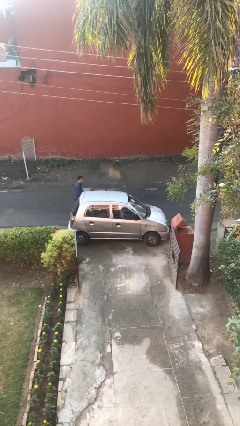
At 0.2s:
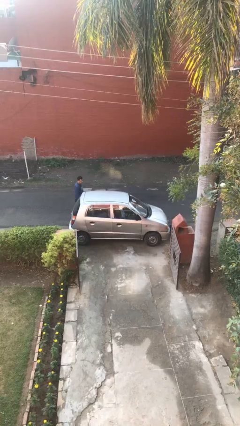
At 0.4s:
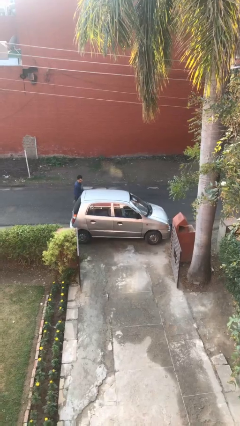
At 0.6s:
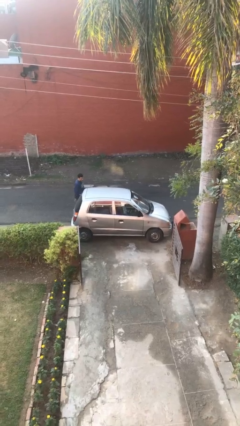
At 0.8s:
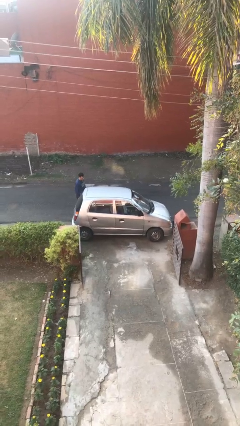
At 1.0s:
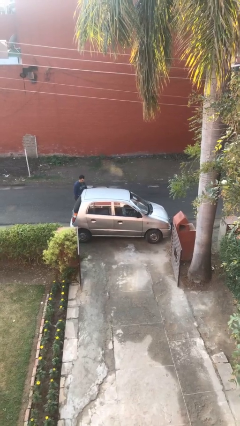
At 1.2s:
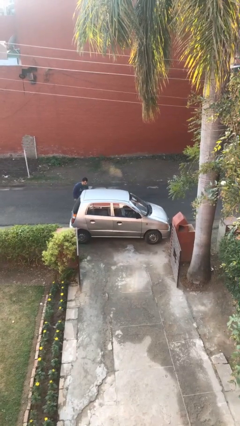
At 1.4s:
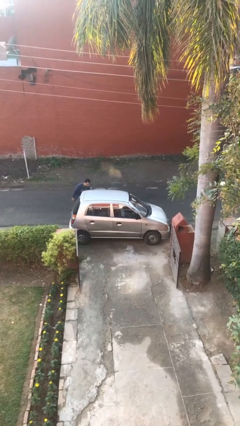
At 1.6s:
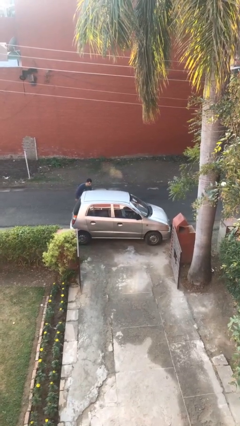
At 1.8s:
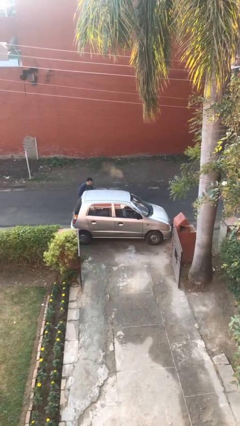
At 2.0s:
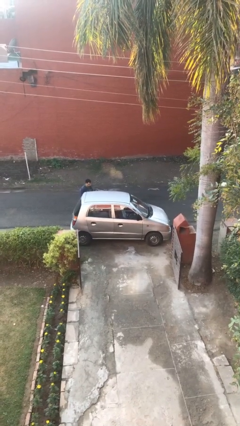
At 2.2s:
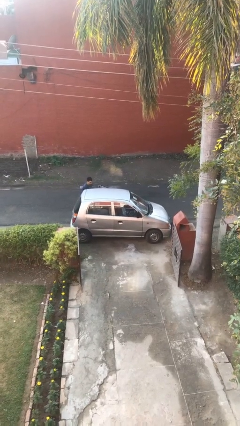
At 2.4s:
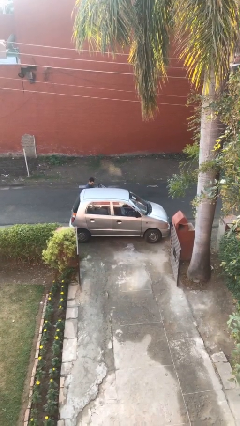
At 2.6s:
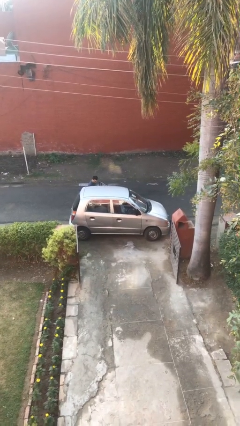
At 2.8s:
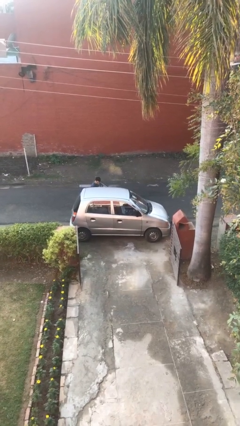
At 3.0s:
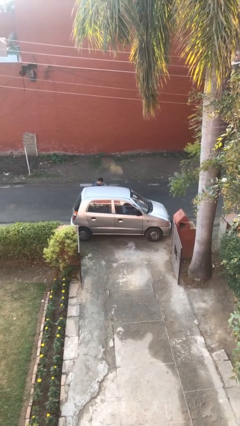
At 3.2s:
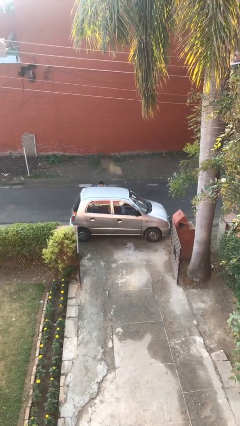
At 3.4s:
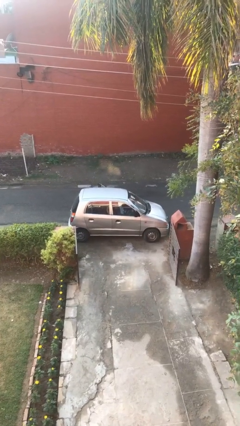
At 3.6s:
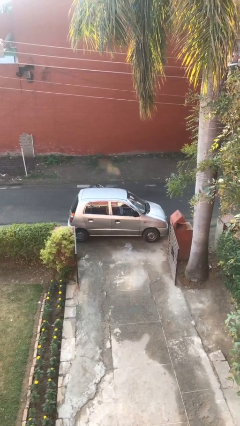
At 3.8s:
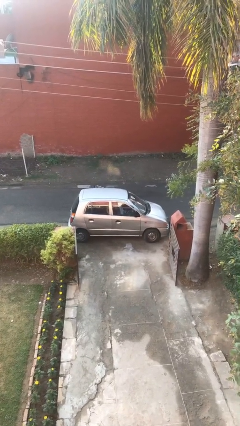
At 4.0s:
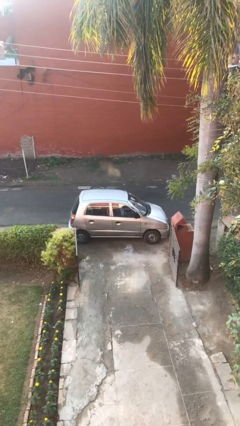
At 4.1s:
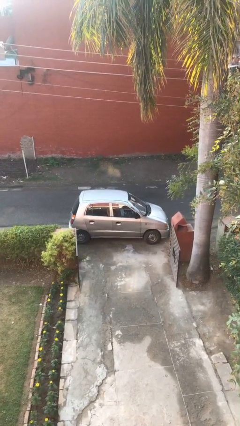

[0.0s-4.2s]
car picks up person

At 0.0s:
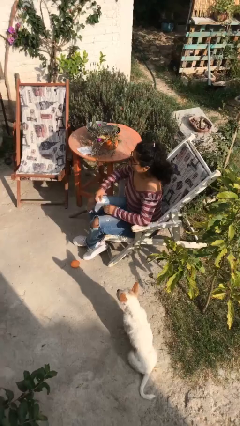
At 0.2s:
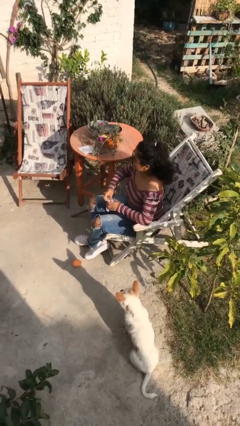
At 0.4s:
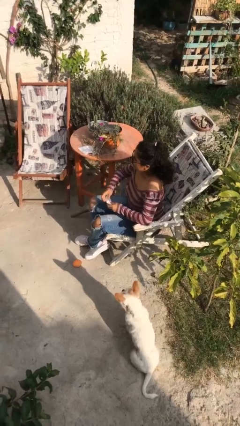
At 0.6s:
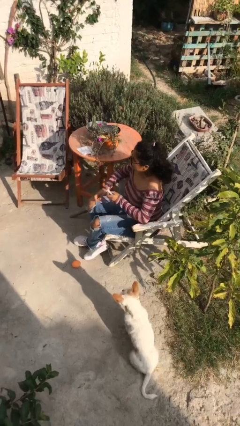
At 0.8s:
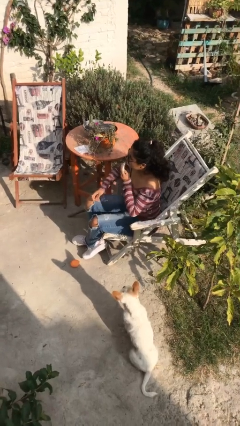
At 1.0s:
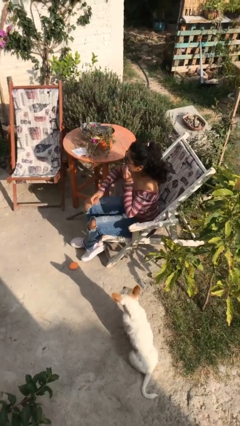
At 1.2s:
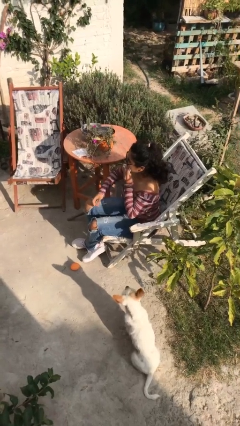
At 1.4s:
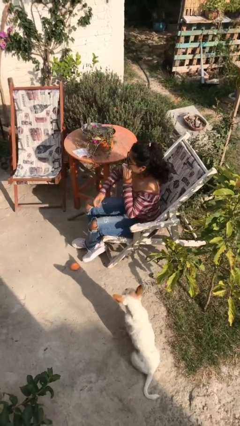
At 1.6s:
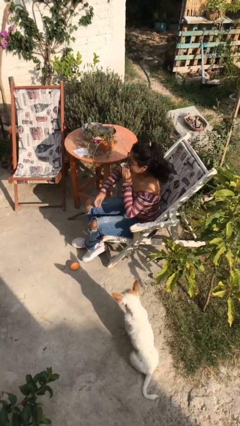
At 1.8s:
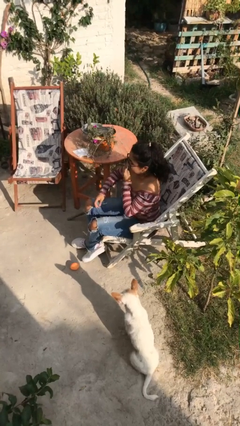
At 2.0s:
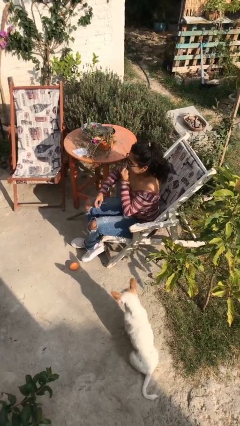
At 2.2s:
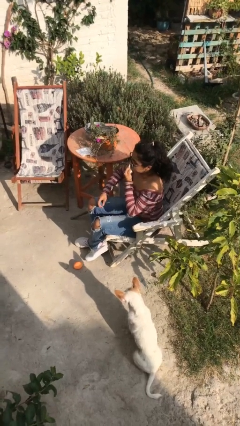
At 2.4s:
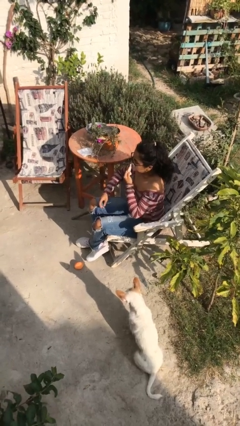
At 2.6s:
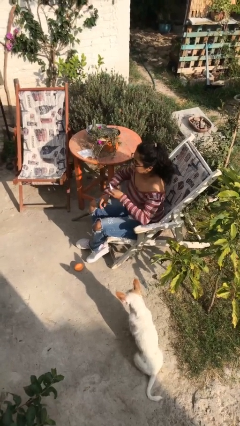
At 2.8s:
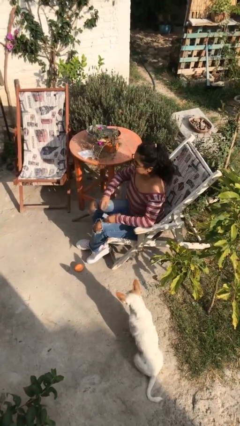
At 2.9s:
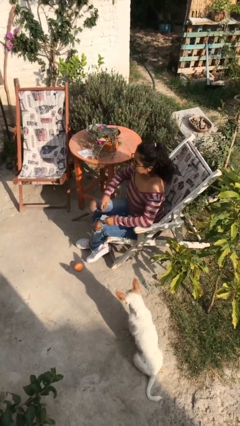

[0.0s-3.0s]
person wipes mouth with napkin

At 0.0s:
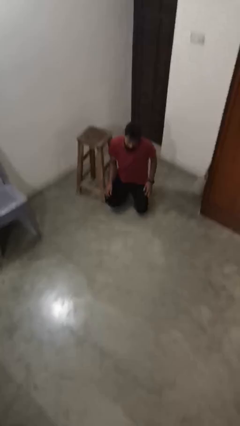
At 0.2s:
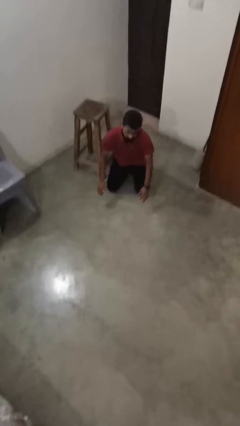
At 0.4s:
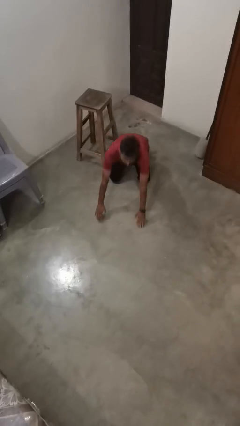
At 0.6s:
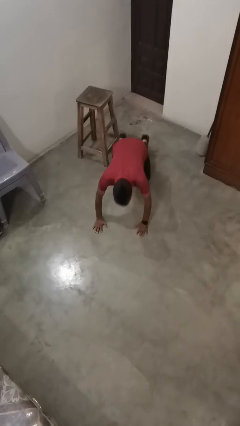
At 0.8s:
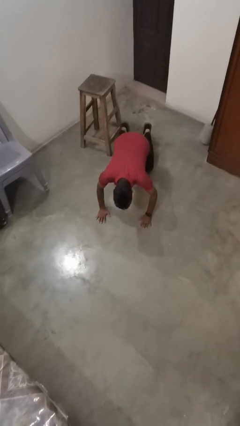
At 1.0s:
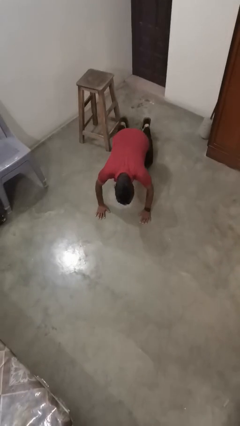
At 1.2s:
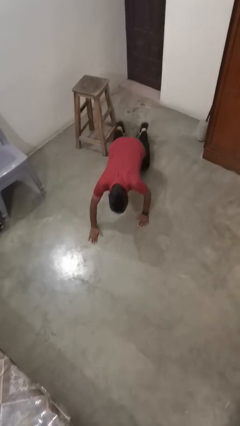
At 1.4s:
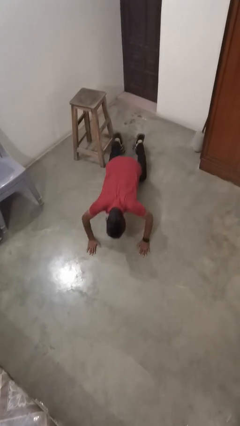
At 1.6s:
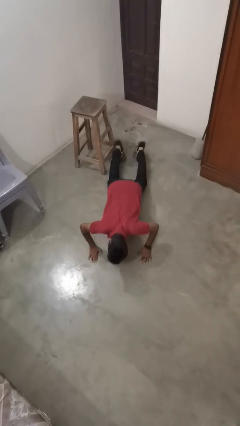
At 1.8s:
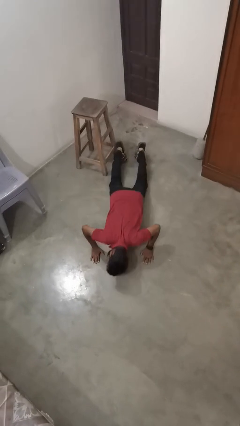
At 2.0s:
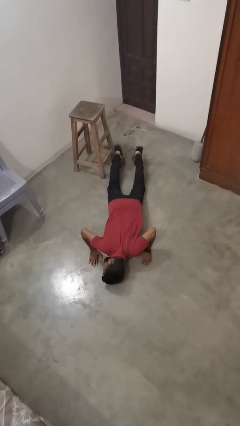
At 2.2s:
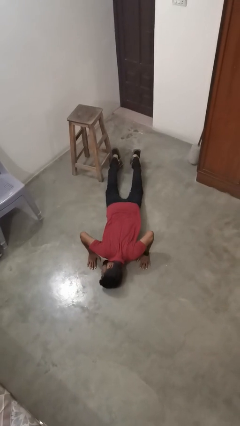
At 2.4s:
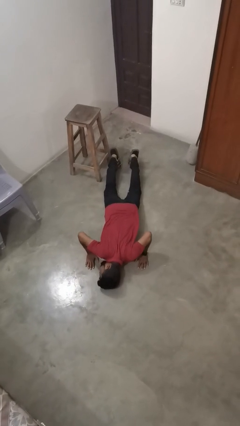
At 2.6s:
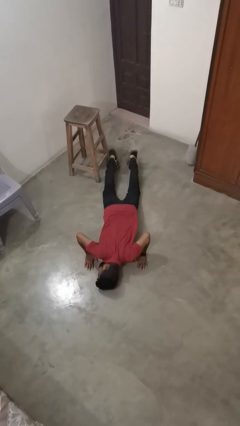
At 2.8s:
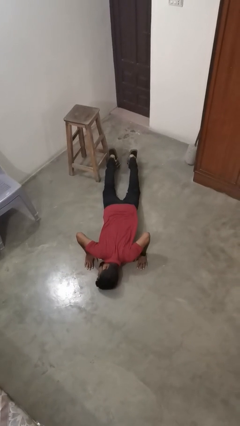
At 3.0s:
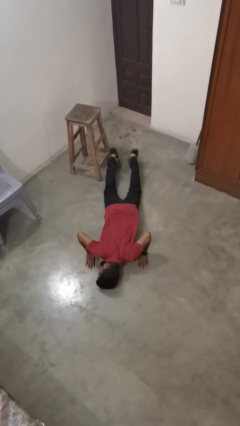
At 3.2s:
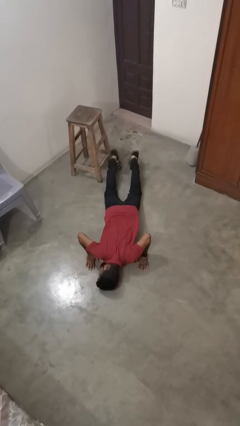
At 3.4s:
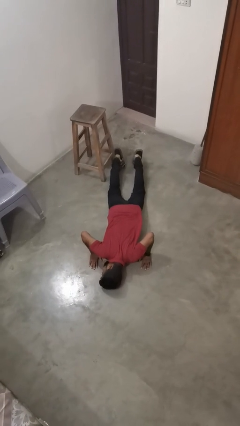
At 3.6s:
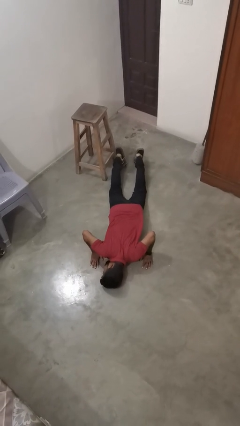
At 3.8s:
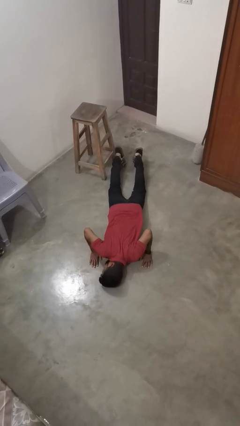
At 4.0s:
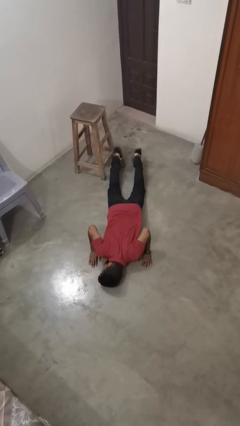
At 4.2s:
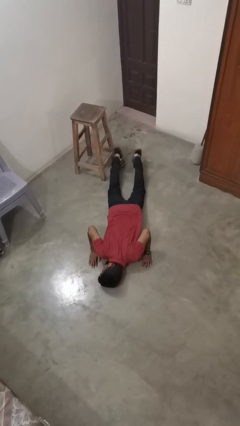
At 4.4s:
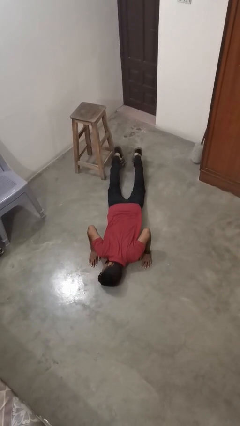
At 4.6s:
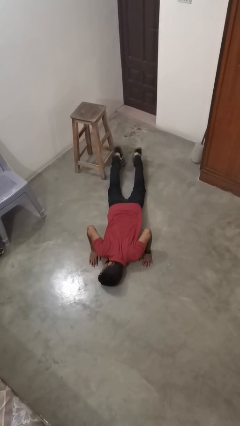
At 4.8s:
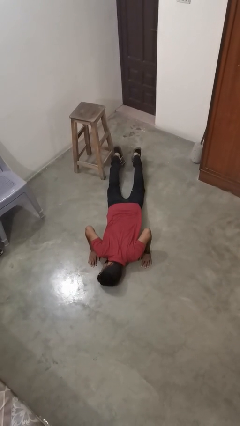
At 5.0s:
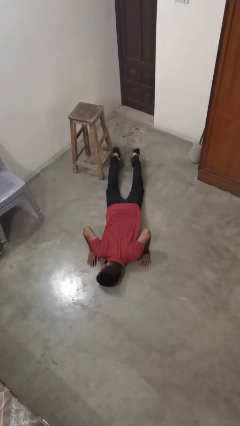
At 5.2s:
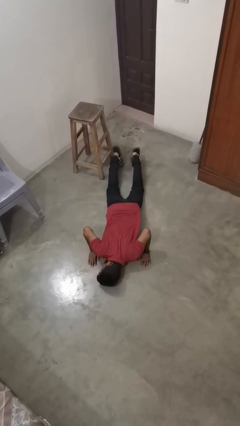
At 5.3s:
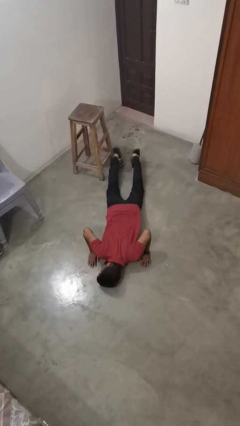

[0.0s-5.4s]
person lies down on floor

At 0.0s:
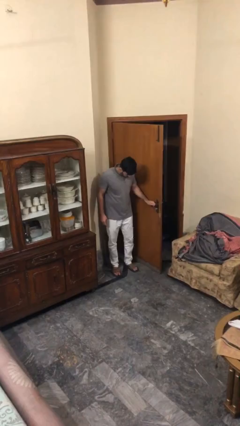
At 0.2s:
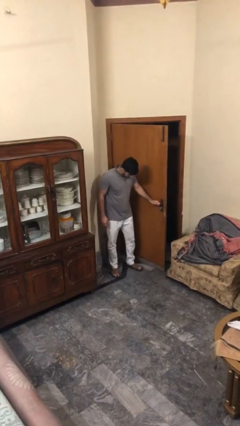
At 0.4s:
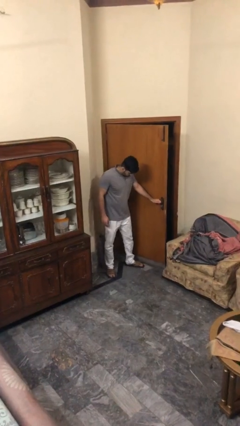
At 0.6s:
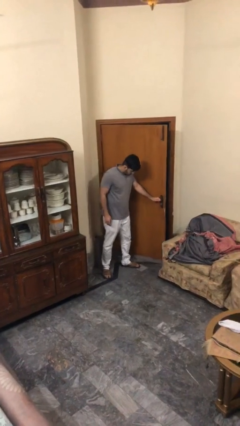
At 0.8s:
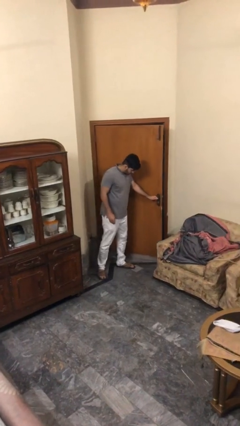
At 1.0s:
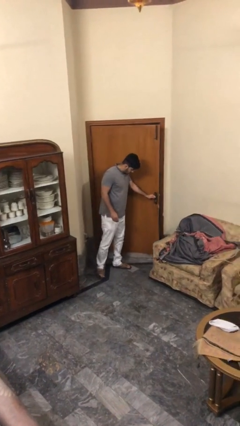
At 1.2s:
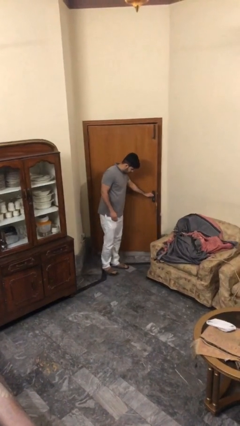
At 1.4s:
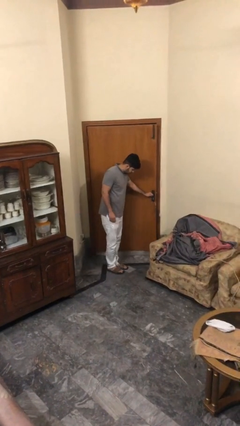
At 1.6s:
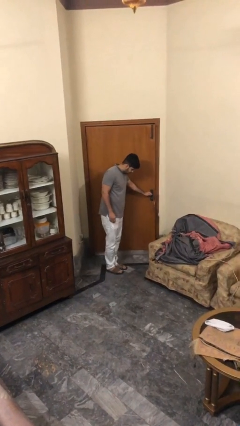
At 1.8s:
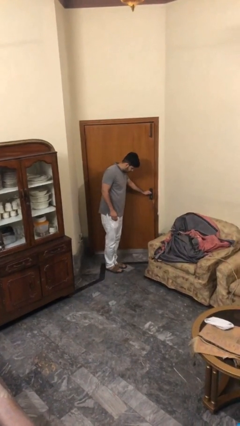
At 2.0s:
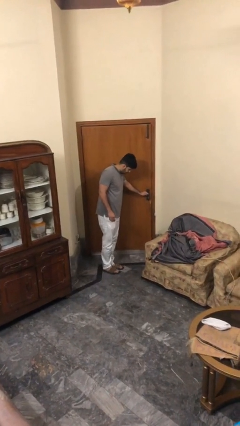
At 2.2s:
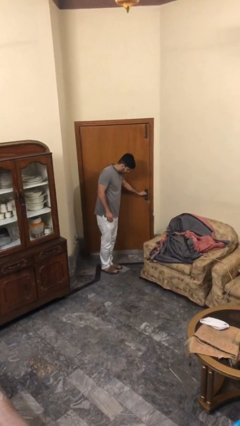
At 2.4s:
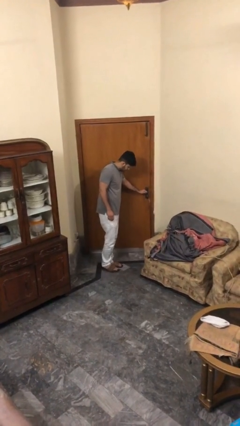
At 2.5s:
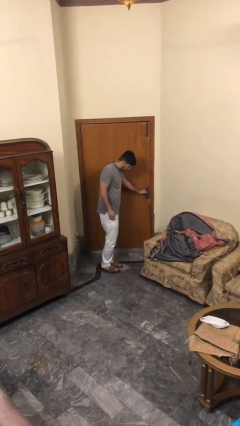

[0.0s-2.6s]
person closes facility door

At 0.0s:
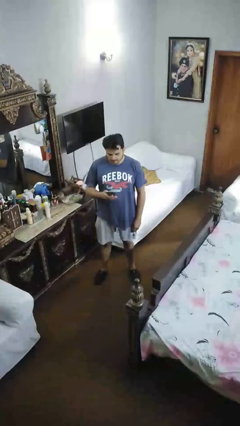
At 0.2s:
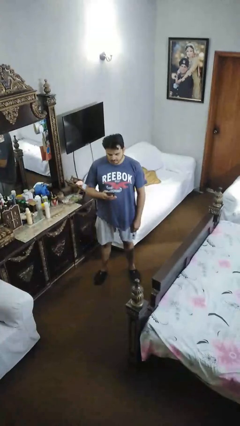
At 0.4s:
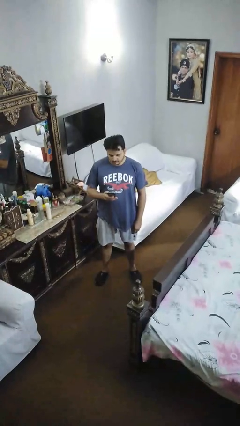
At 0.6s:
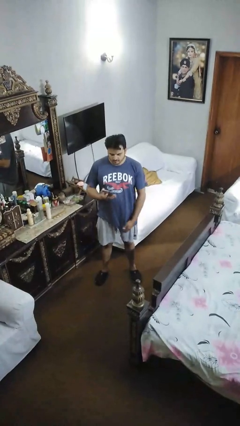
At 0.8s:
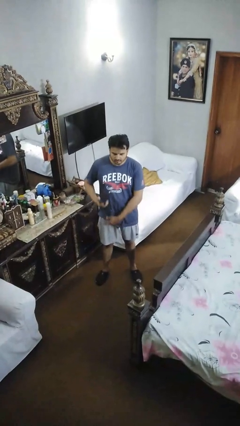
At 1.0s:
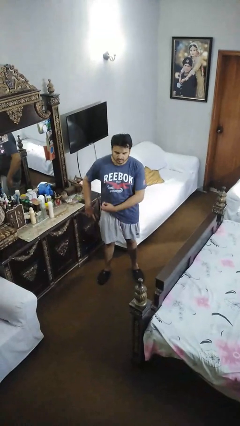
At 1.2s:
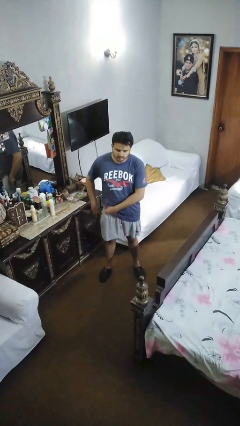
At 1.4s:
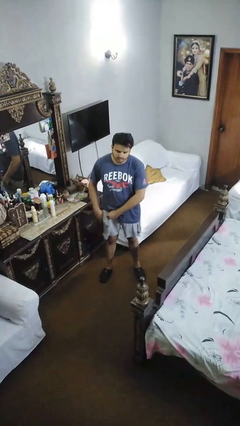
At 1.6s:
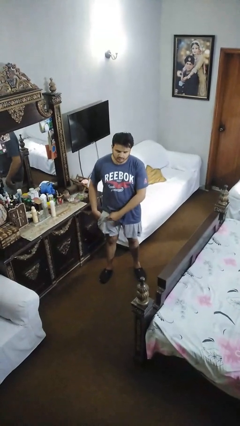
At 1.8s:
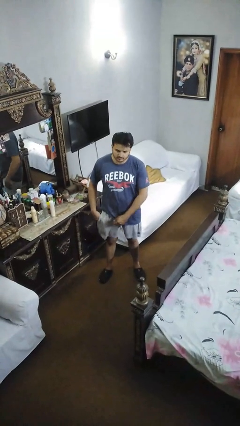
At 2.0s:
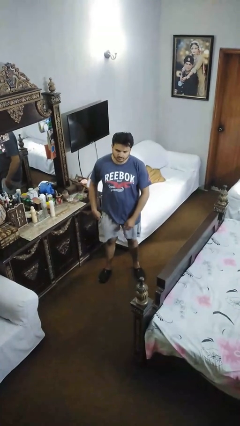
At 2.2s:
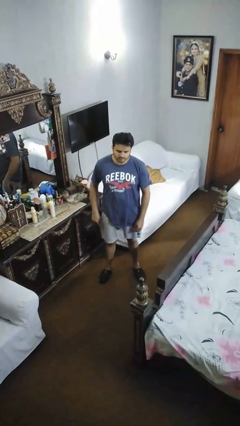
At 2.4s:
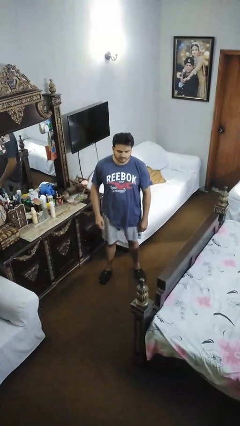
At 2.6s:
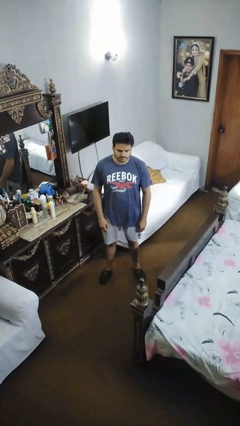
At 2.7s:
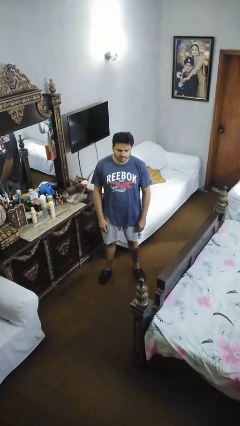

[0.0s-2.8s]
person puts phone into pocket
